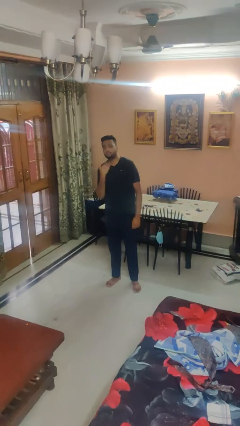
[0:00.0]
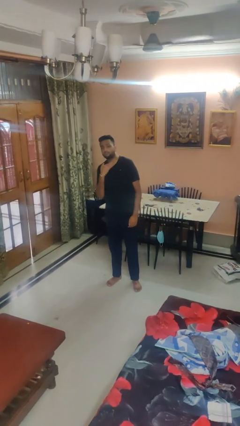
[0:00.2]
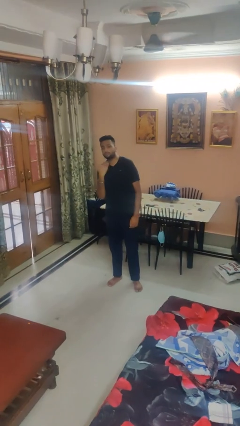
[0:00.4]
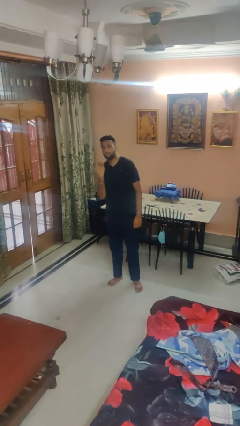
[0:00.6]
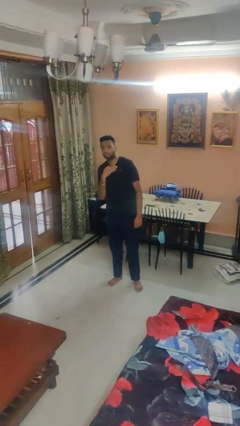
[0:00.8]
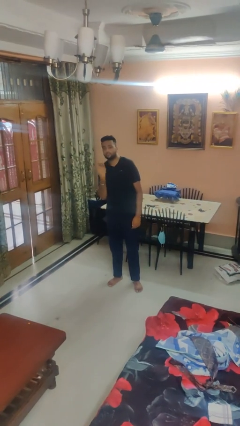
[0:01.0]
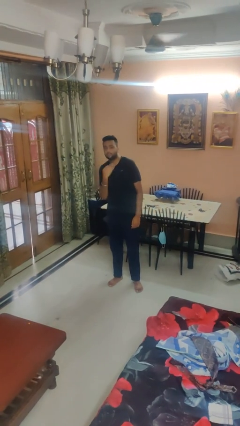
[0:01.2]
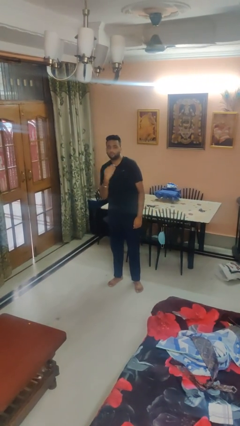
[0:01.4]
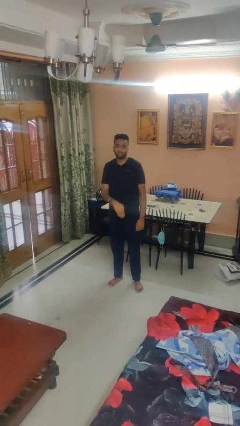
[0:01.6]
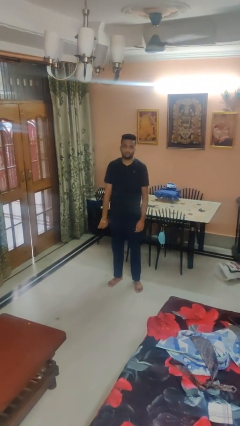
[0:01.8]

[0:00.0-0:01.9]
person gestures cut

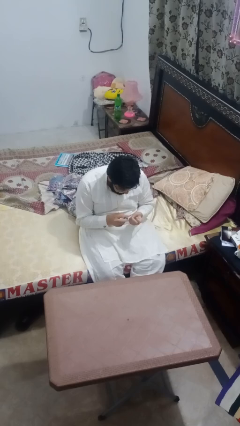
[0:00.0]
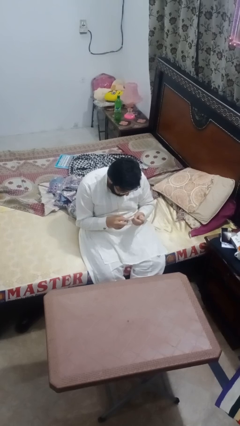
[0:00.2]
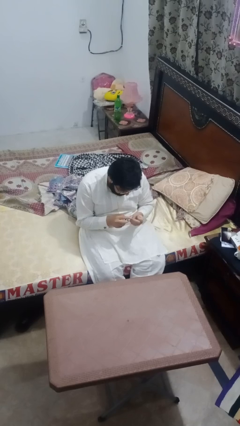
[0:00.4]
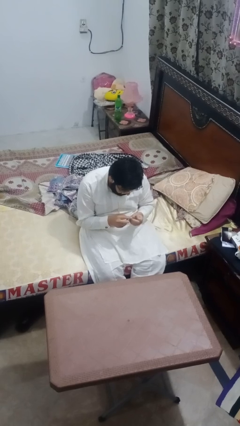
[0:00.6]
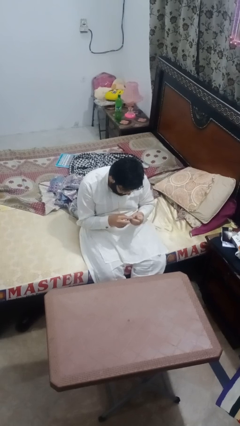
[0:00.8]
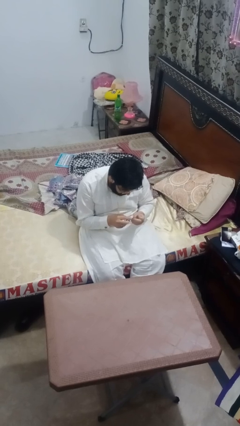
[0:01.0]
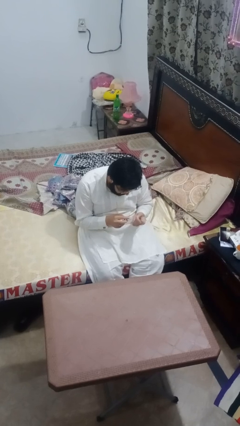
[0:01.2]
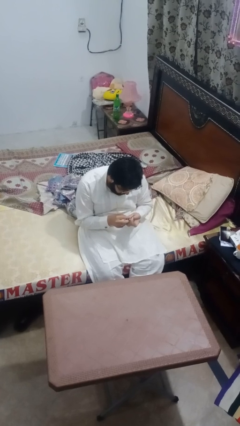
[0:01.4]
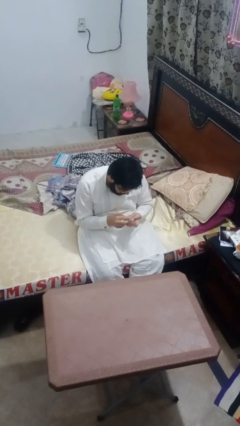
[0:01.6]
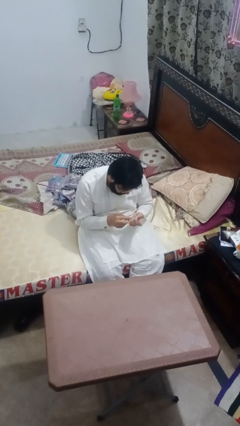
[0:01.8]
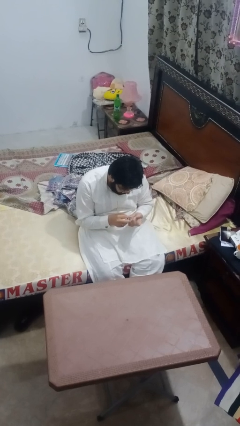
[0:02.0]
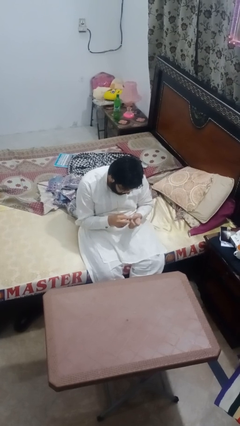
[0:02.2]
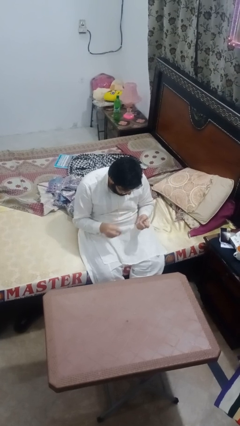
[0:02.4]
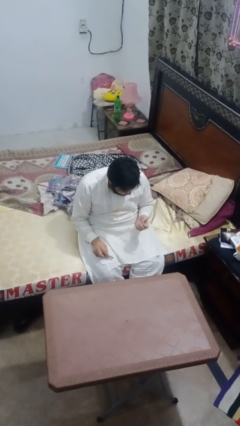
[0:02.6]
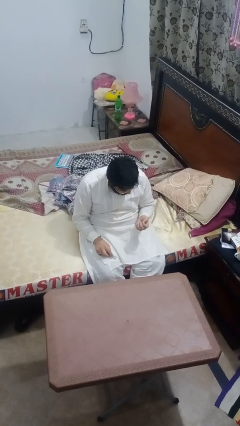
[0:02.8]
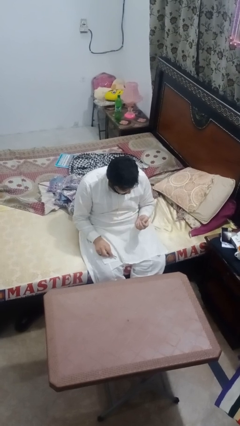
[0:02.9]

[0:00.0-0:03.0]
person files fingernails

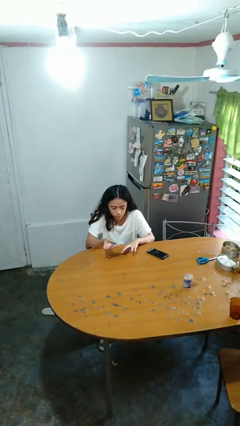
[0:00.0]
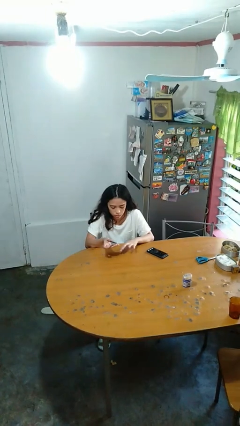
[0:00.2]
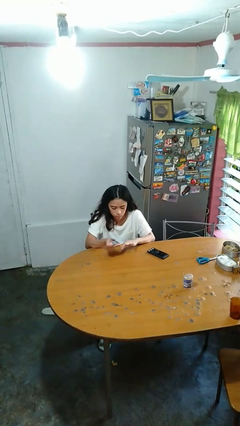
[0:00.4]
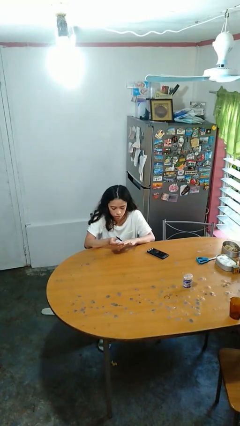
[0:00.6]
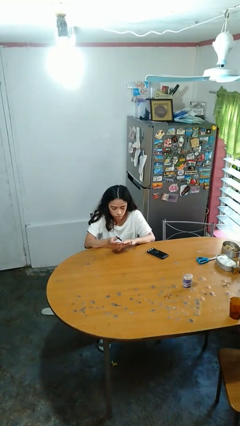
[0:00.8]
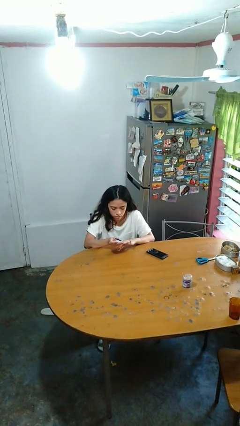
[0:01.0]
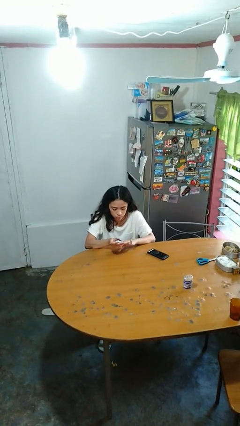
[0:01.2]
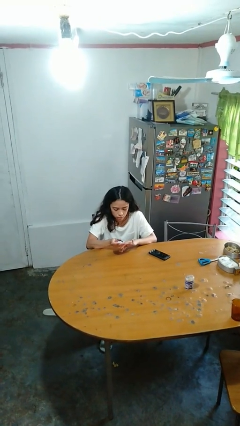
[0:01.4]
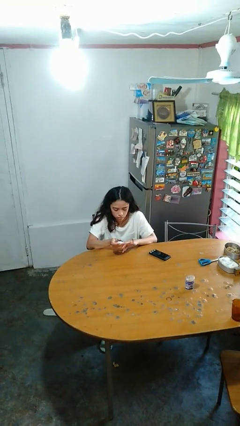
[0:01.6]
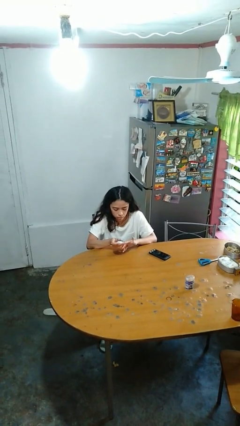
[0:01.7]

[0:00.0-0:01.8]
person clips fingernails

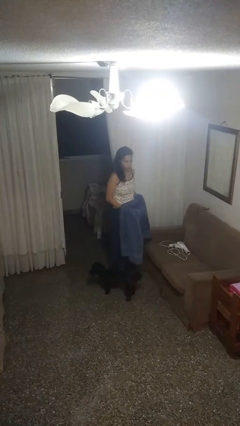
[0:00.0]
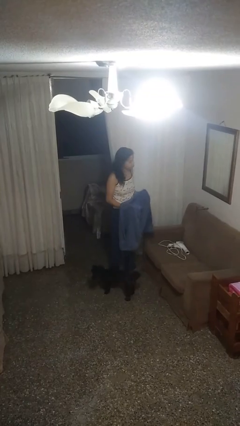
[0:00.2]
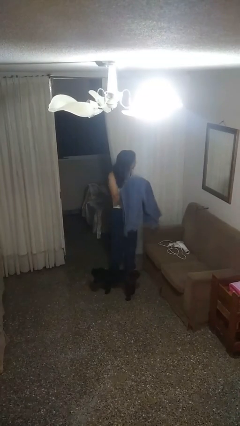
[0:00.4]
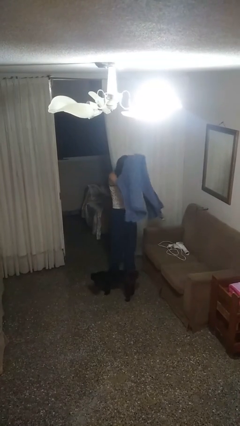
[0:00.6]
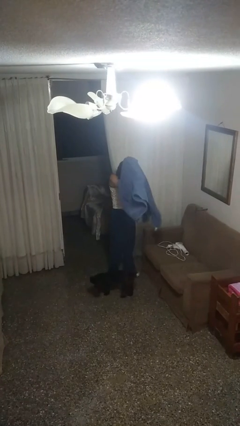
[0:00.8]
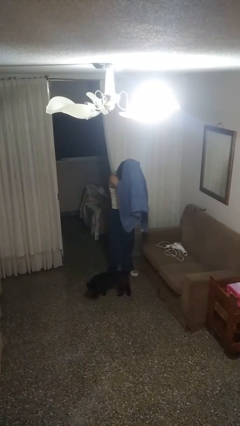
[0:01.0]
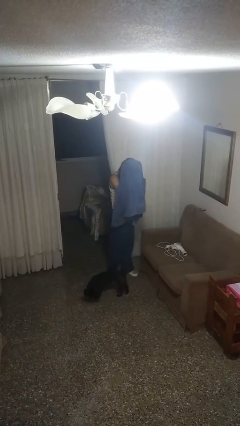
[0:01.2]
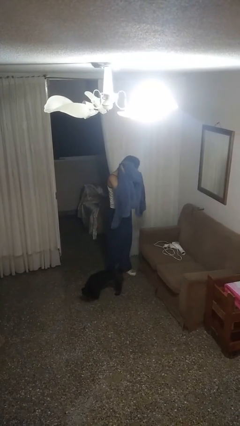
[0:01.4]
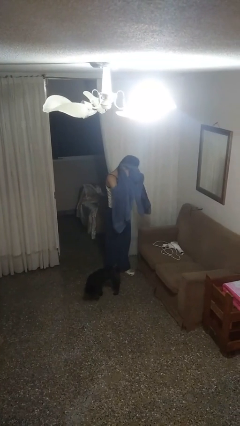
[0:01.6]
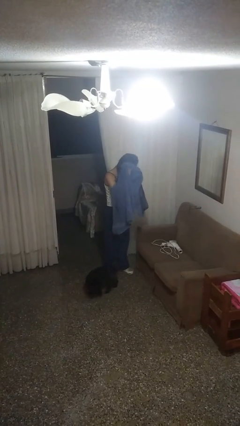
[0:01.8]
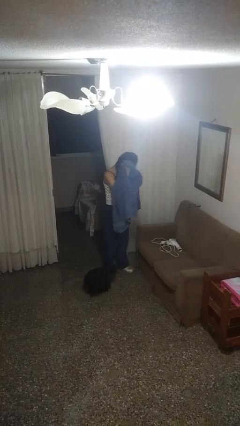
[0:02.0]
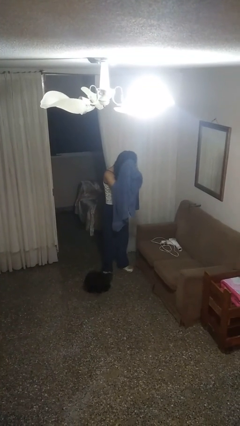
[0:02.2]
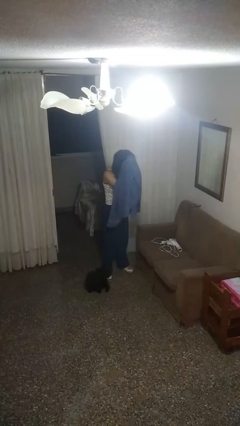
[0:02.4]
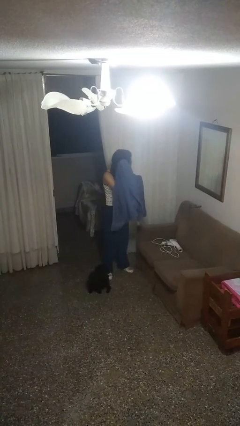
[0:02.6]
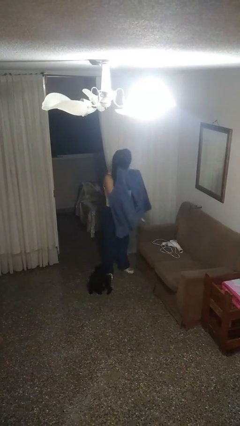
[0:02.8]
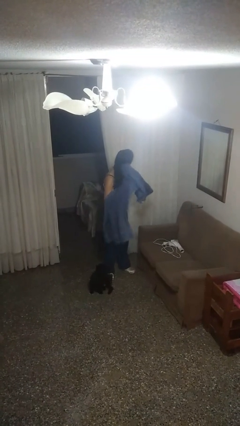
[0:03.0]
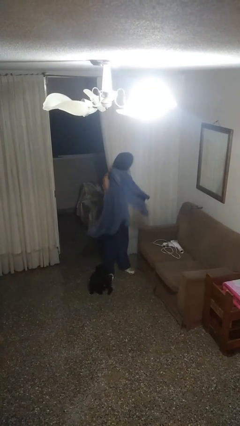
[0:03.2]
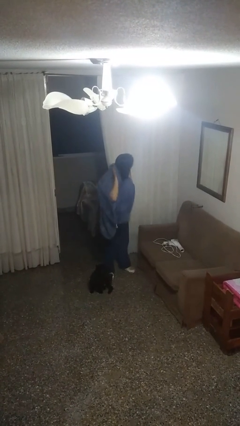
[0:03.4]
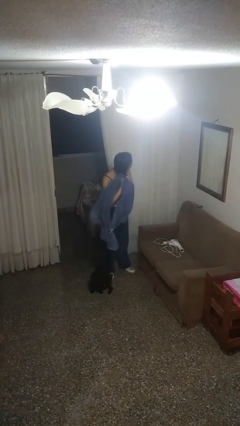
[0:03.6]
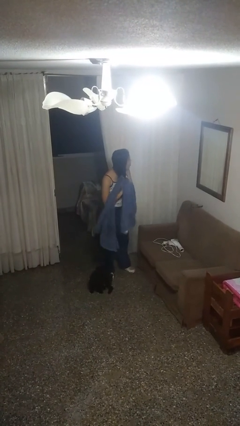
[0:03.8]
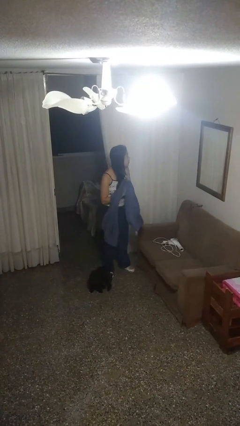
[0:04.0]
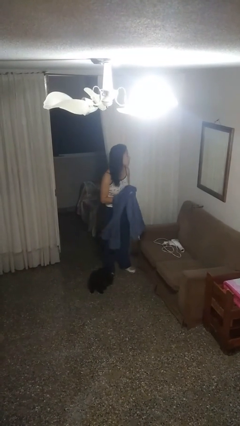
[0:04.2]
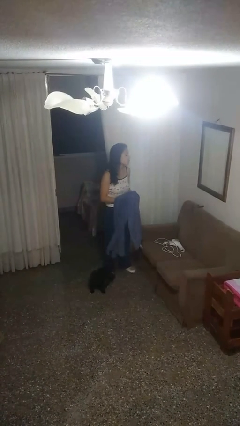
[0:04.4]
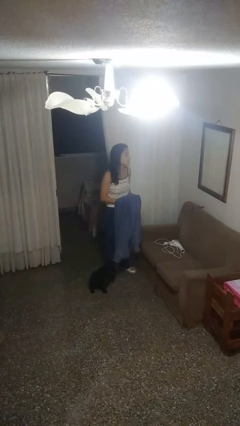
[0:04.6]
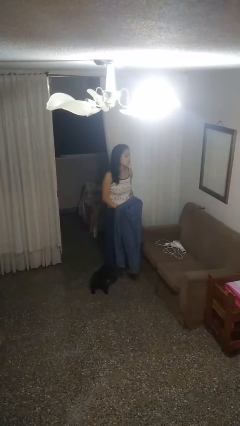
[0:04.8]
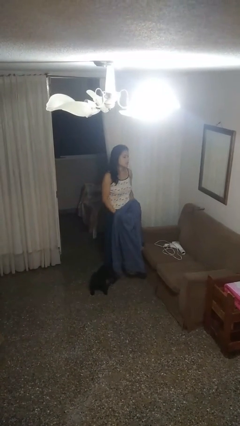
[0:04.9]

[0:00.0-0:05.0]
person dries hair with towel

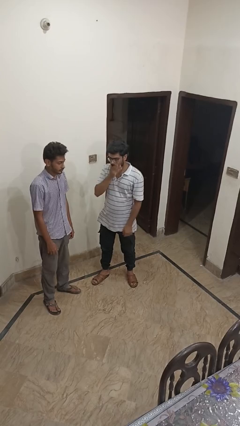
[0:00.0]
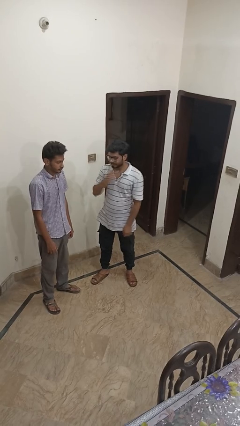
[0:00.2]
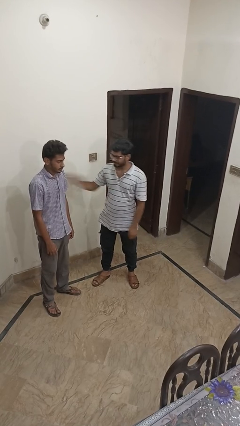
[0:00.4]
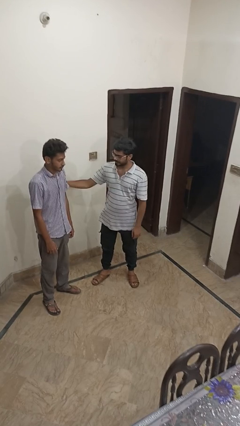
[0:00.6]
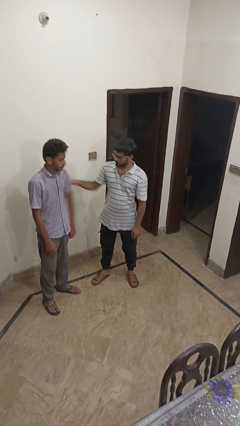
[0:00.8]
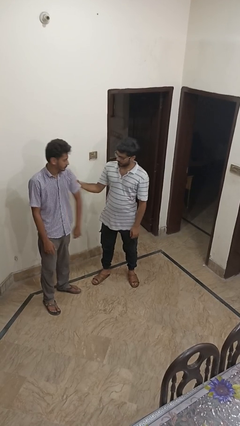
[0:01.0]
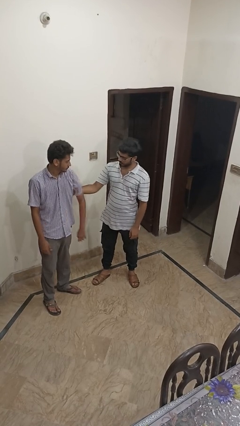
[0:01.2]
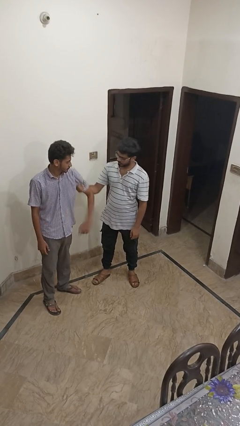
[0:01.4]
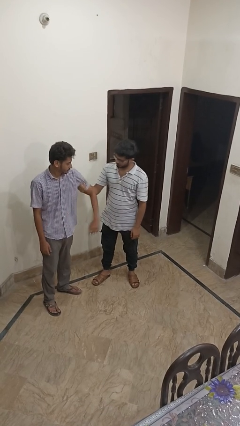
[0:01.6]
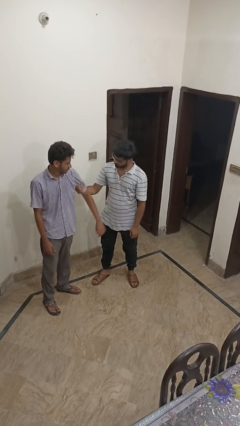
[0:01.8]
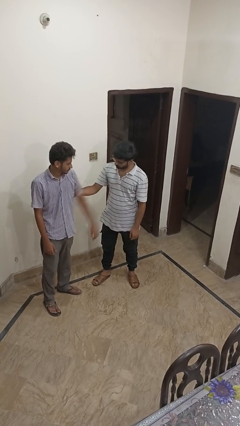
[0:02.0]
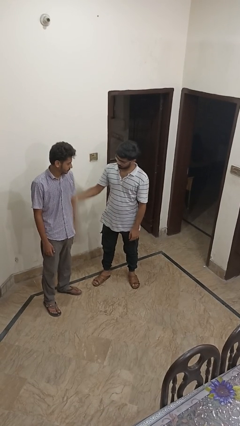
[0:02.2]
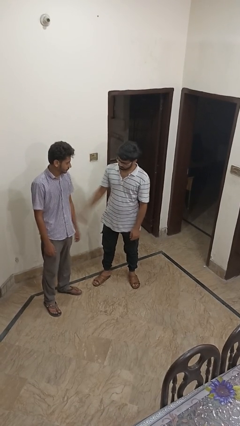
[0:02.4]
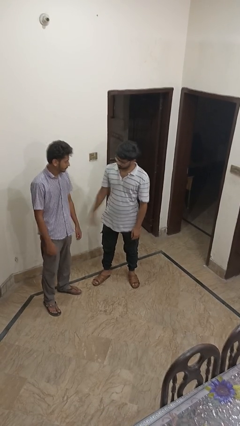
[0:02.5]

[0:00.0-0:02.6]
person grabs person by bicep

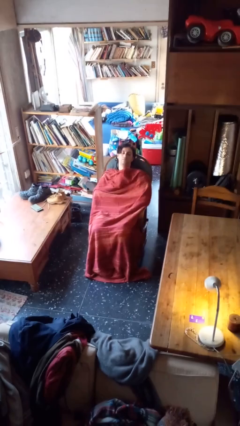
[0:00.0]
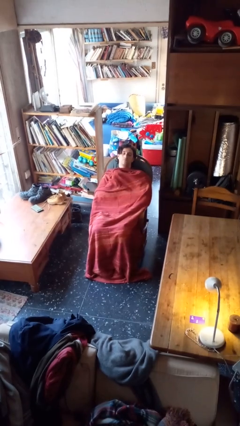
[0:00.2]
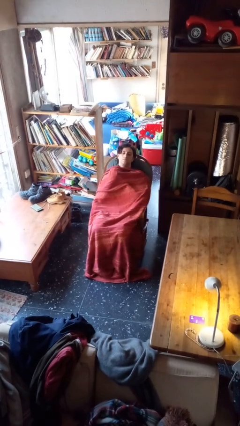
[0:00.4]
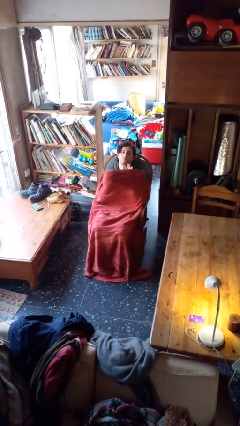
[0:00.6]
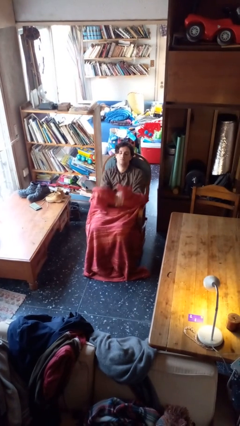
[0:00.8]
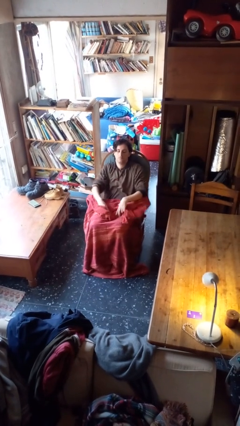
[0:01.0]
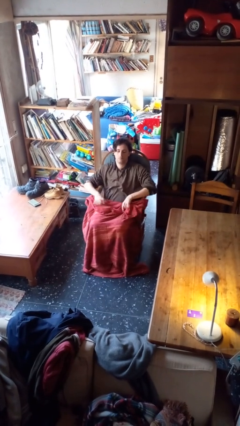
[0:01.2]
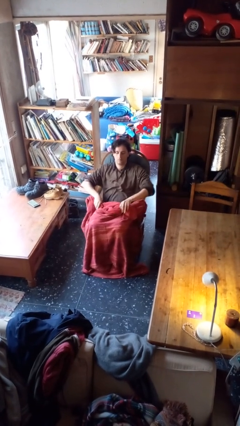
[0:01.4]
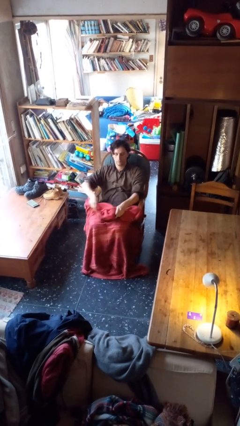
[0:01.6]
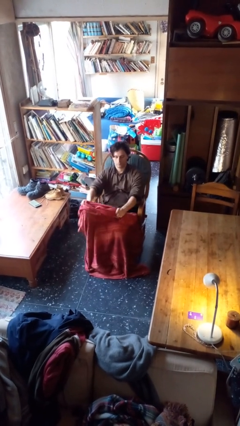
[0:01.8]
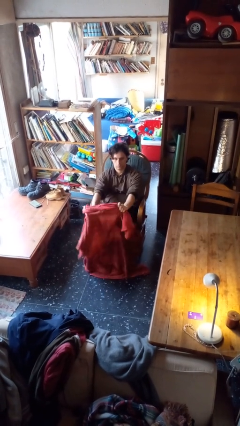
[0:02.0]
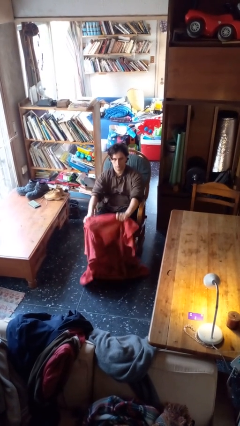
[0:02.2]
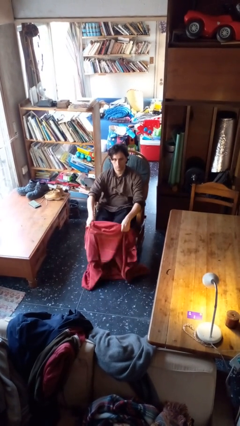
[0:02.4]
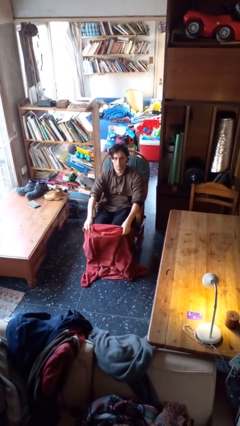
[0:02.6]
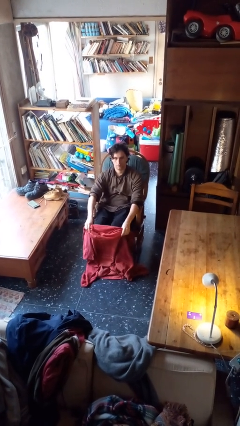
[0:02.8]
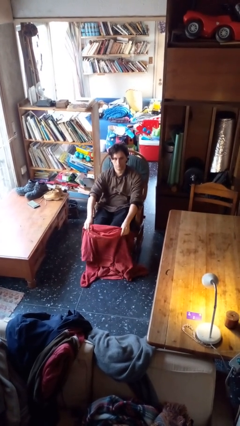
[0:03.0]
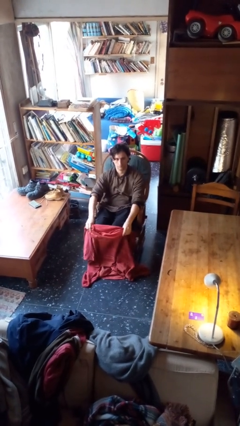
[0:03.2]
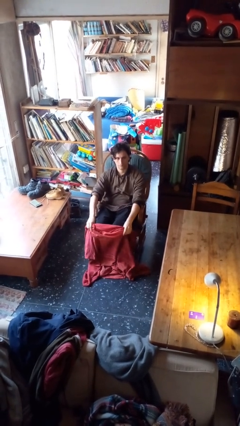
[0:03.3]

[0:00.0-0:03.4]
person uncovers with blanket
